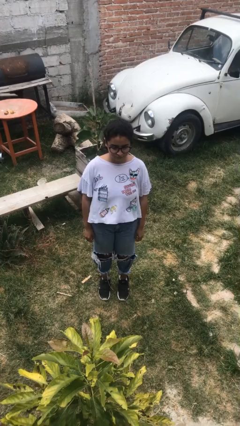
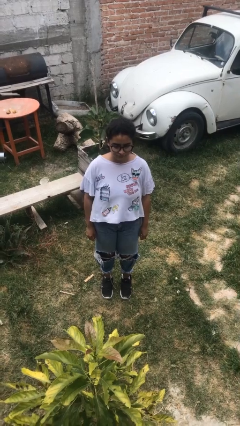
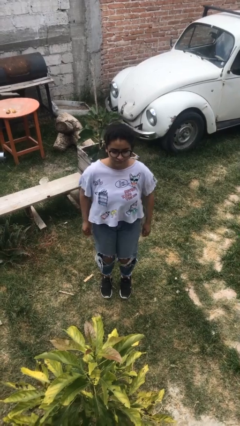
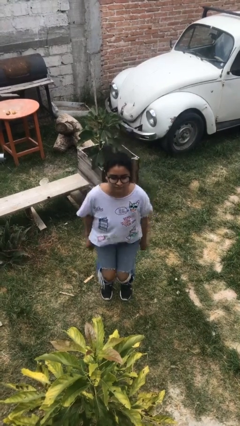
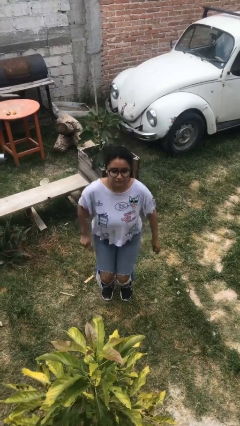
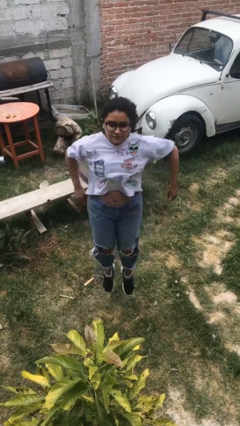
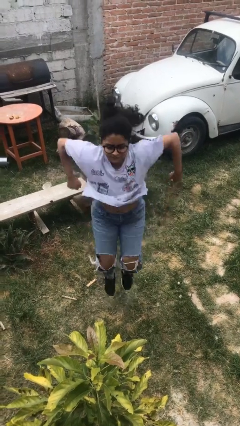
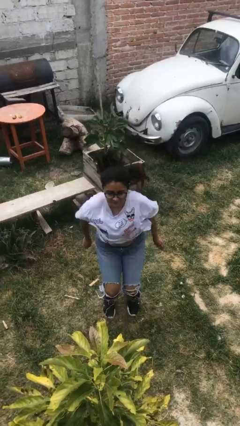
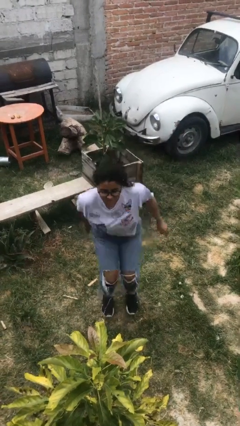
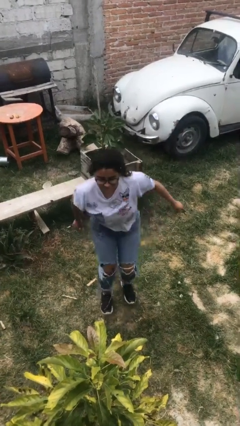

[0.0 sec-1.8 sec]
person jumps

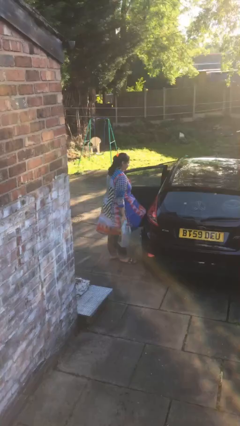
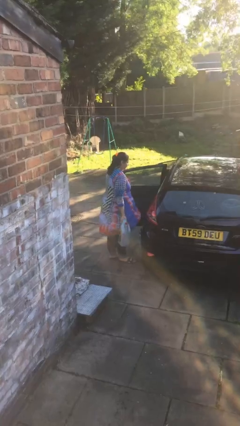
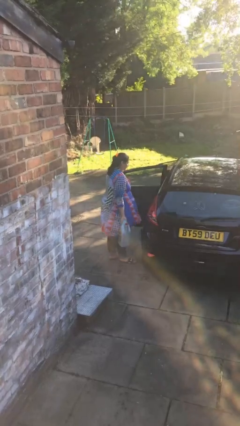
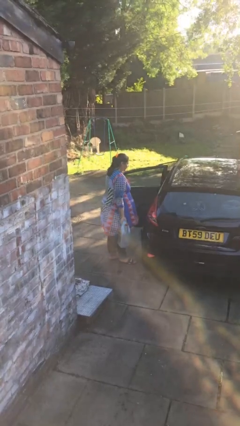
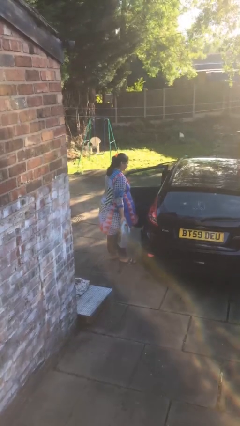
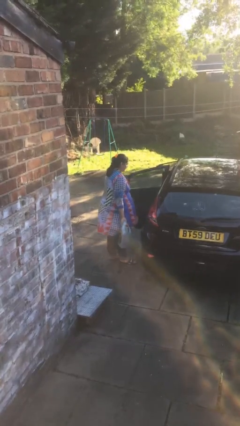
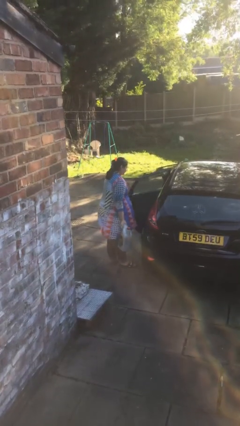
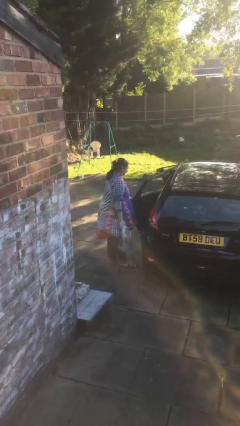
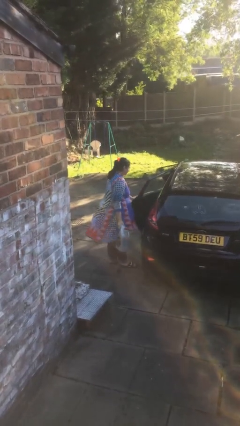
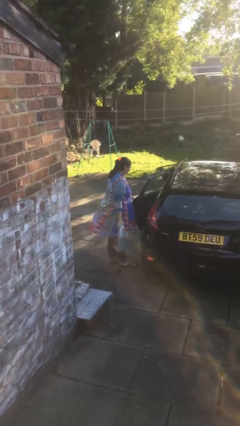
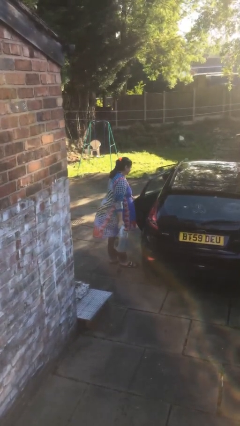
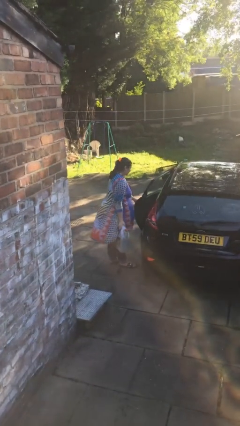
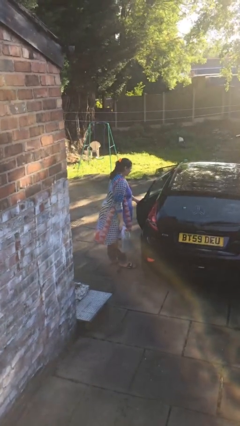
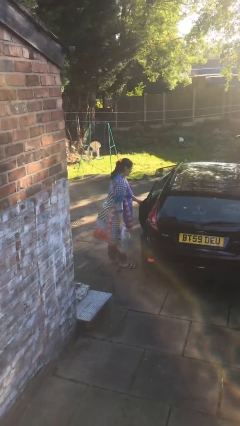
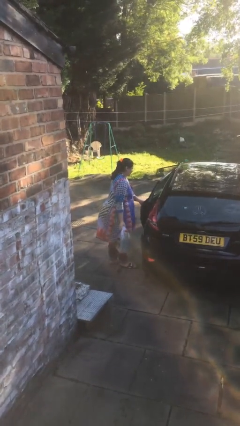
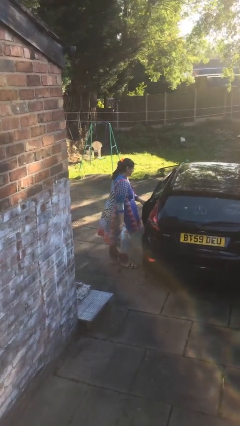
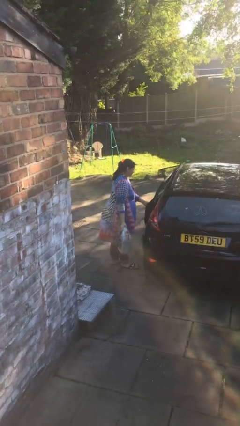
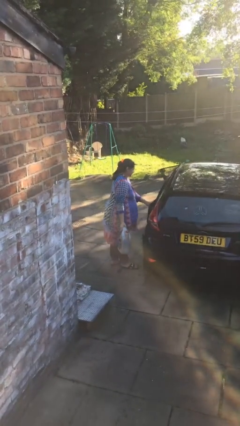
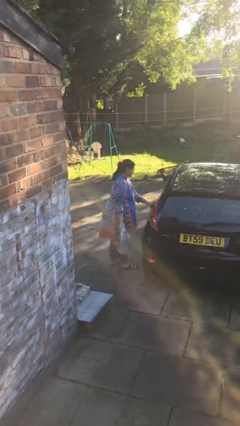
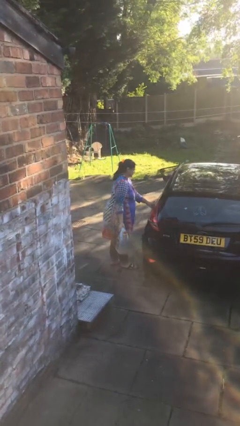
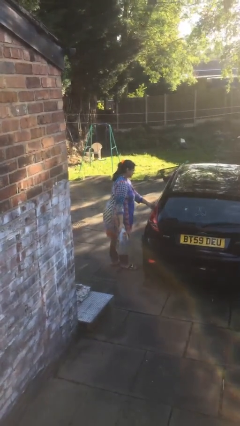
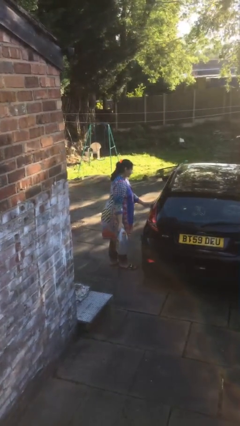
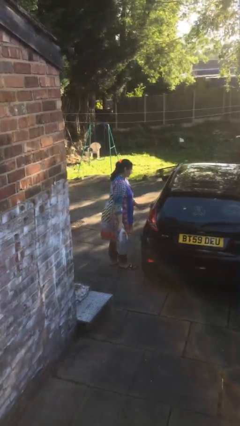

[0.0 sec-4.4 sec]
person closes car door

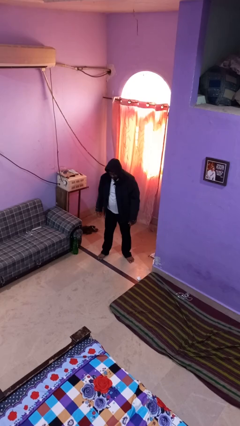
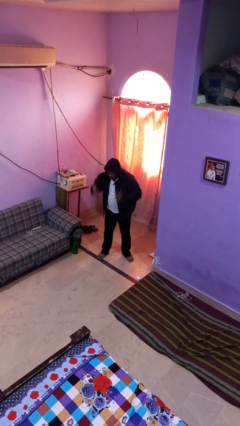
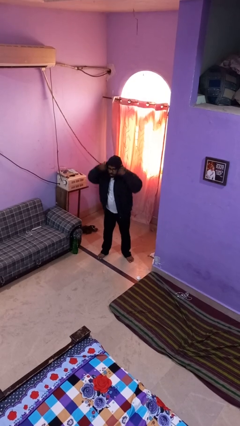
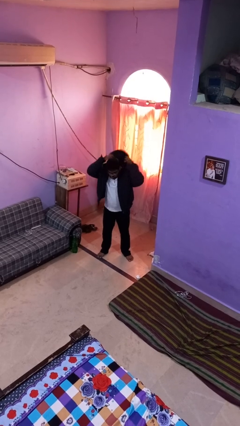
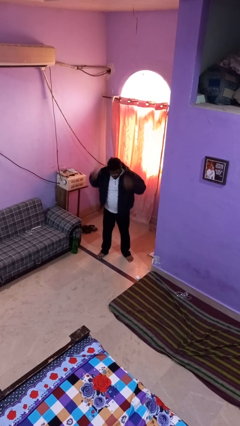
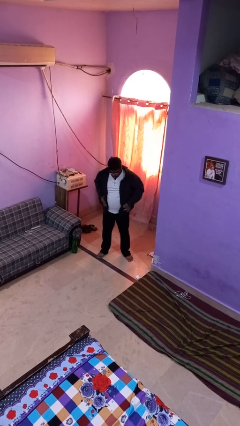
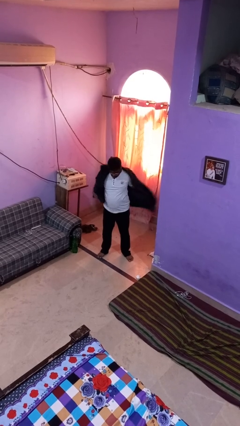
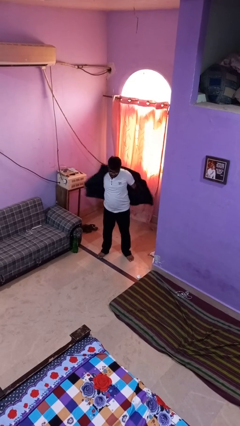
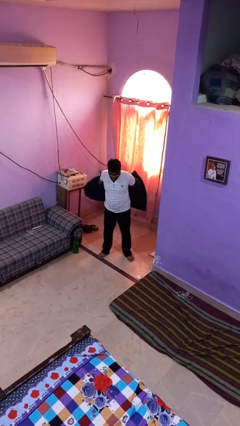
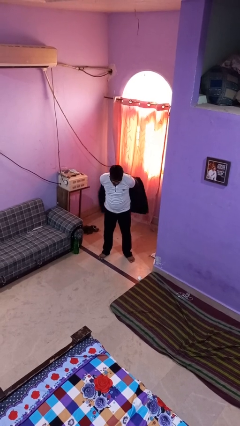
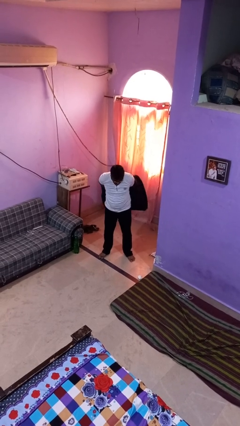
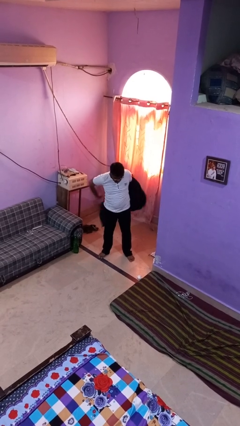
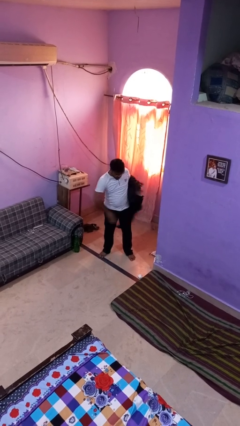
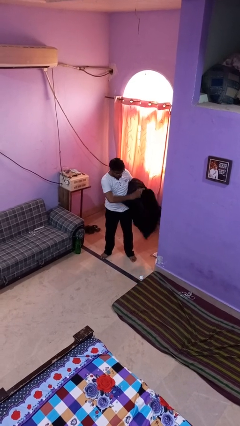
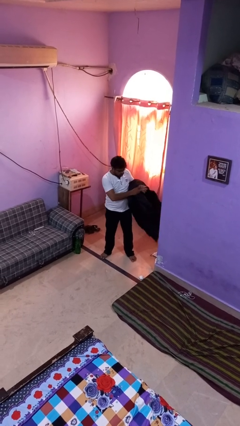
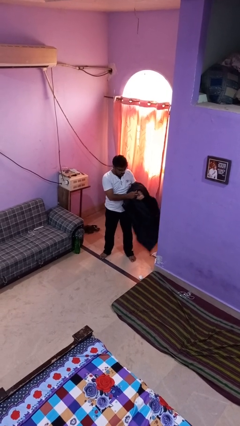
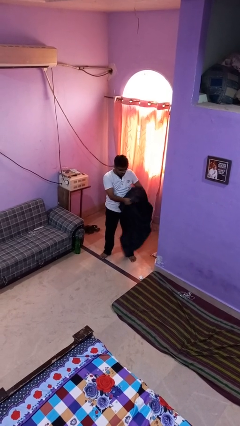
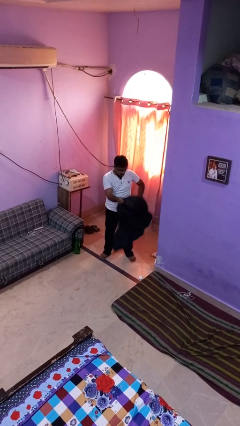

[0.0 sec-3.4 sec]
person takes off hoodie

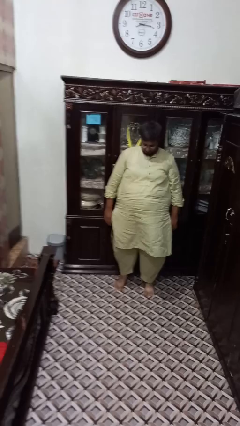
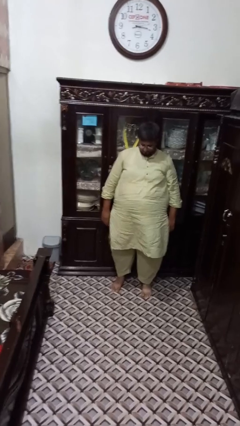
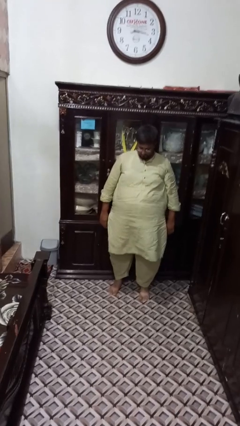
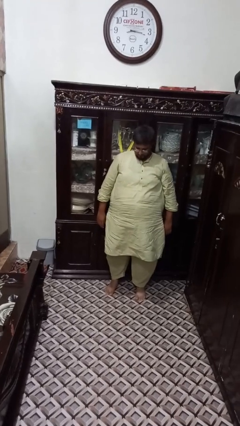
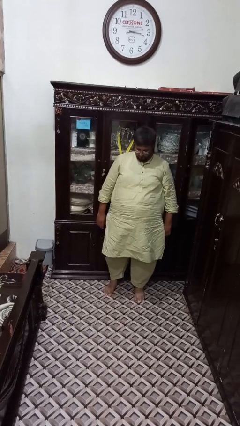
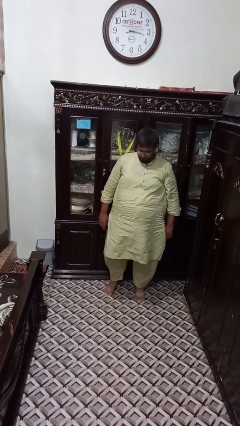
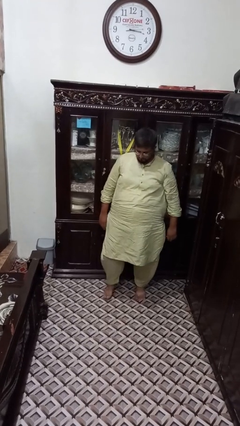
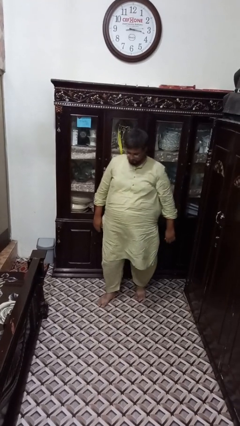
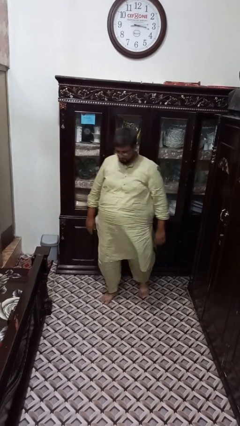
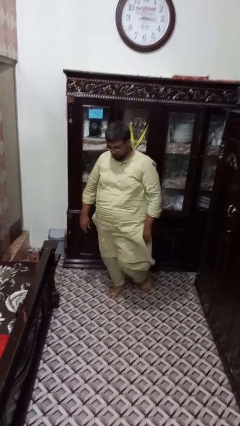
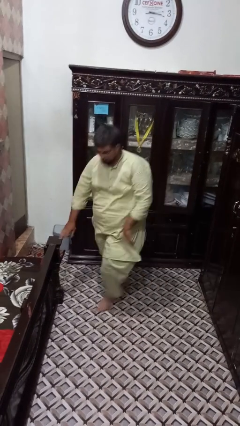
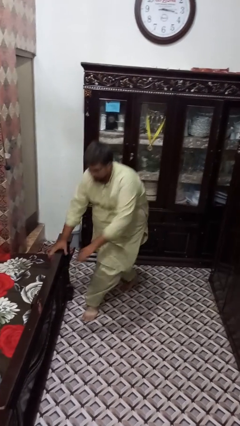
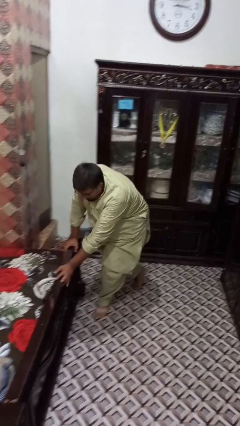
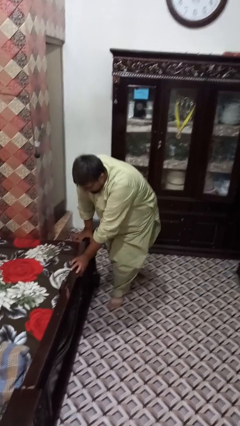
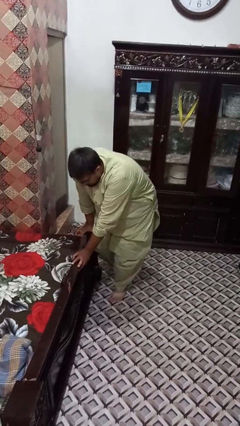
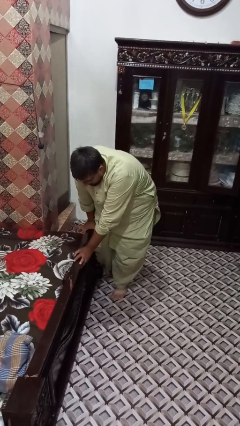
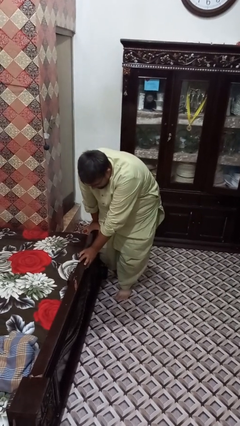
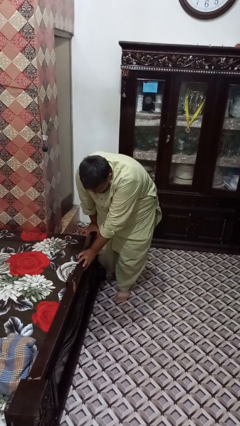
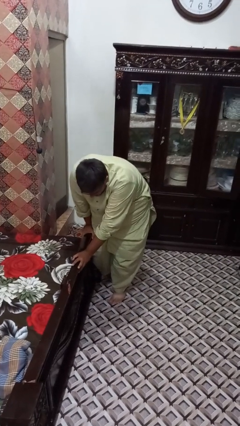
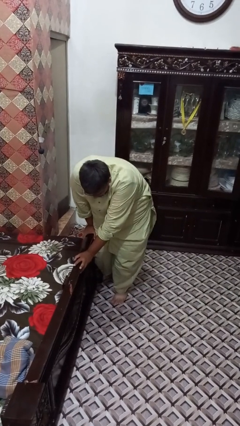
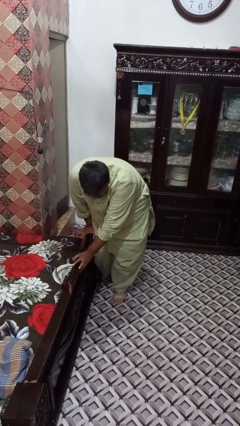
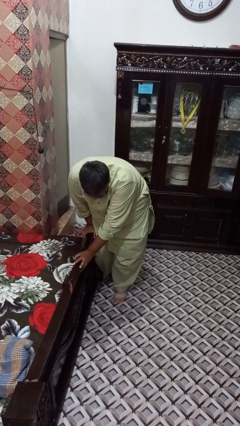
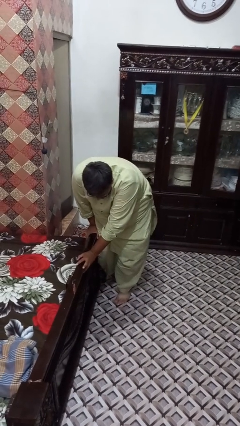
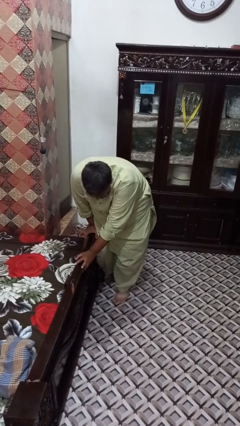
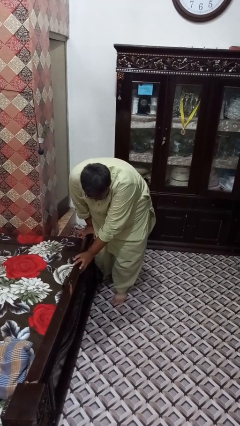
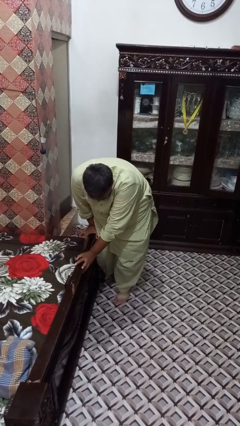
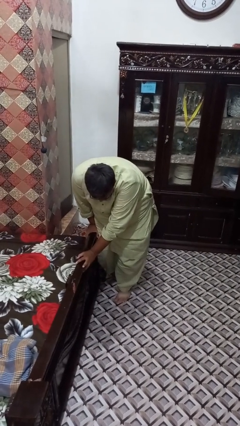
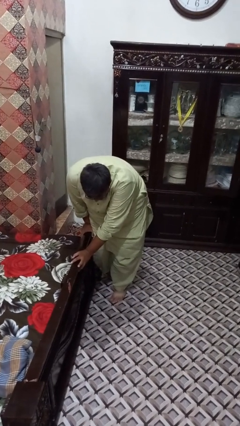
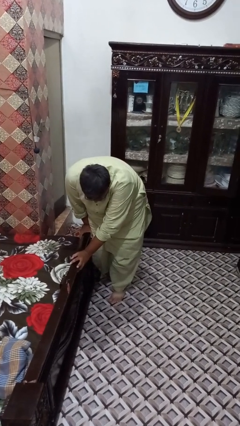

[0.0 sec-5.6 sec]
person trips on object on floor

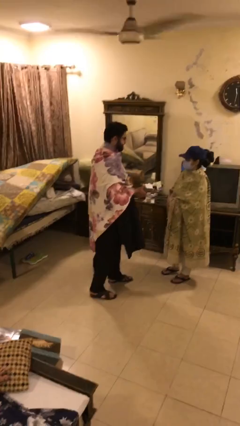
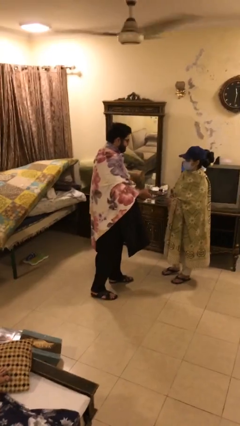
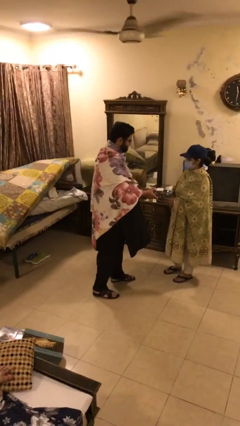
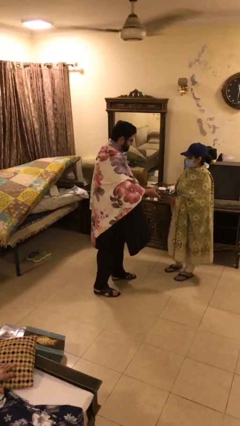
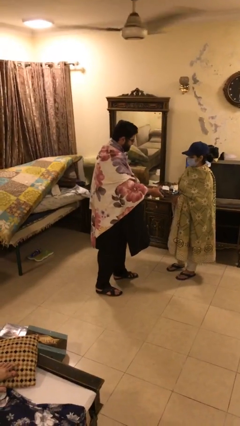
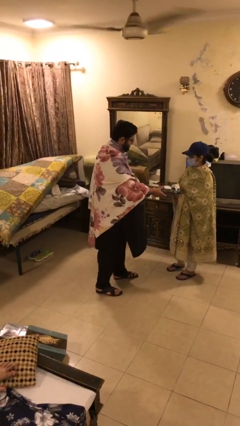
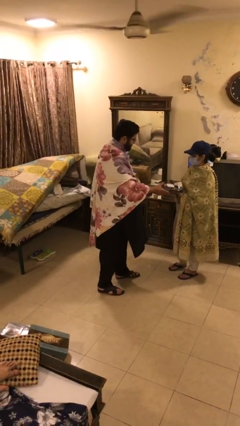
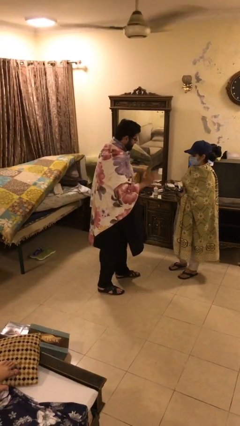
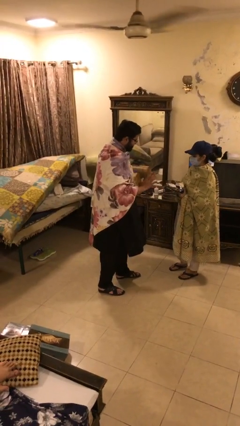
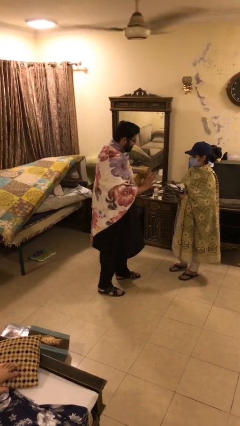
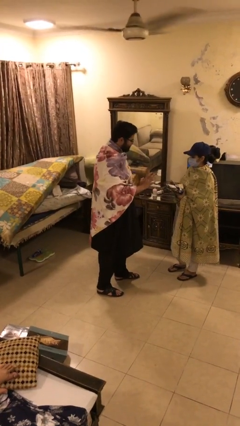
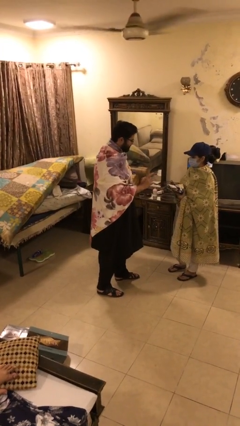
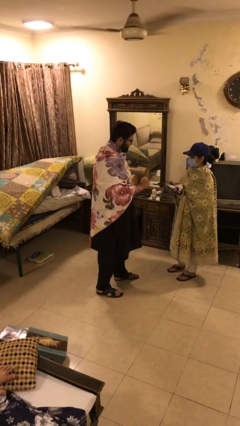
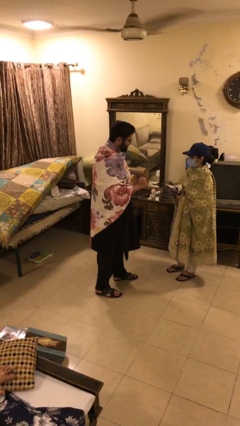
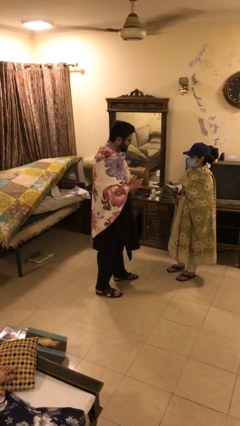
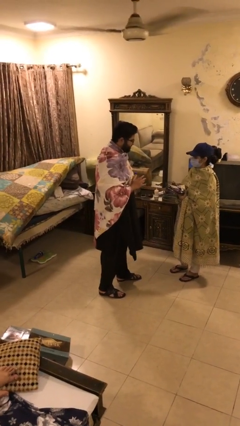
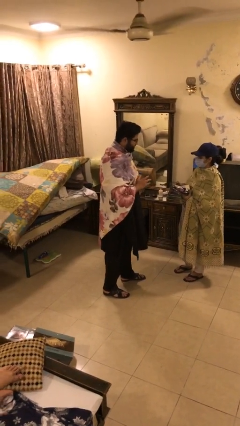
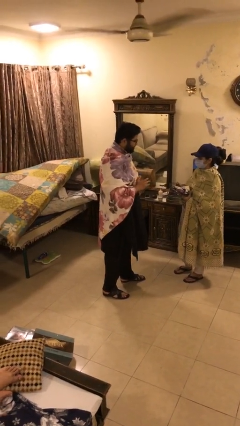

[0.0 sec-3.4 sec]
person transfers object to person
